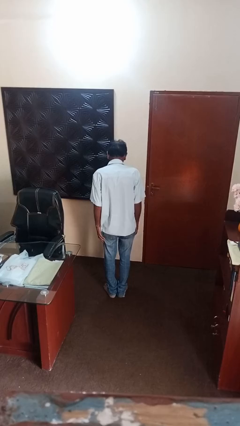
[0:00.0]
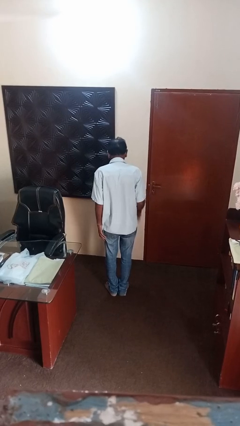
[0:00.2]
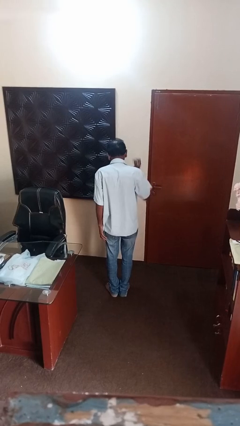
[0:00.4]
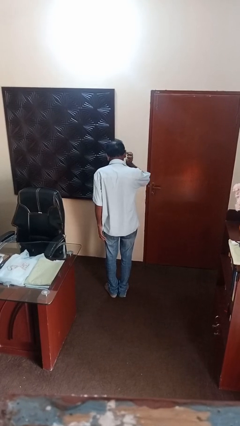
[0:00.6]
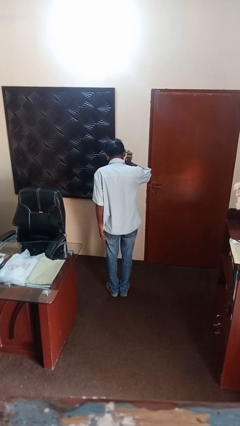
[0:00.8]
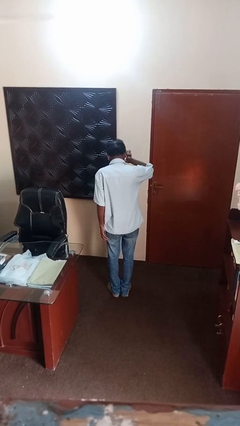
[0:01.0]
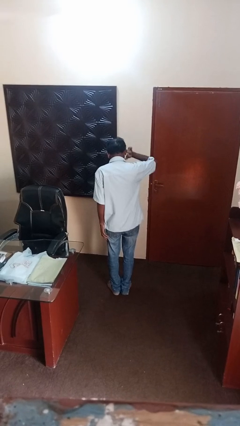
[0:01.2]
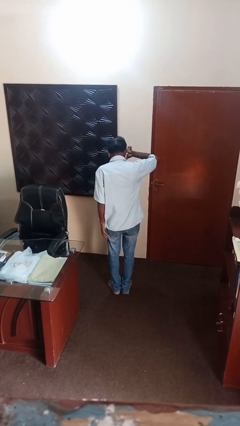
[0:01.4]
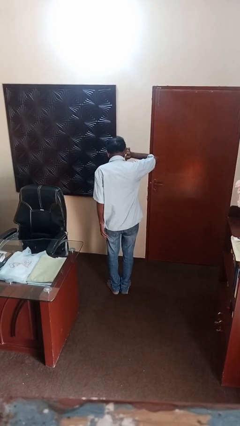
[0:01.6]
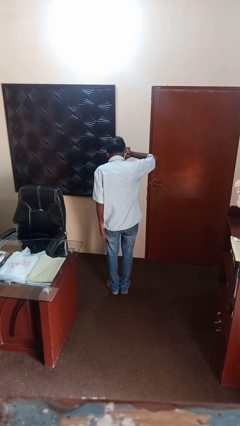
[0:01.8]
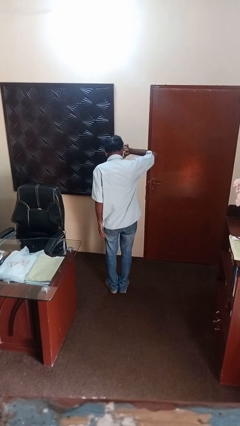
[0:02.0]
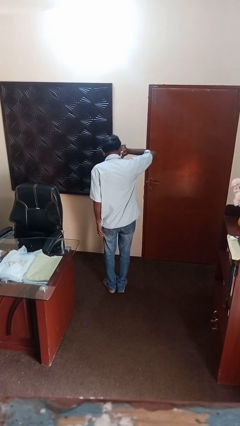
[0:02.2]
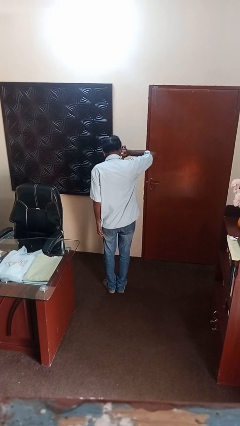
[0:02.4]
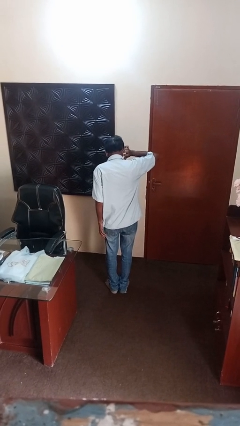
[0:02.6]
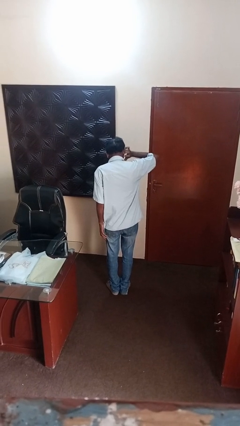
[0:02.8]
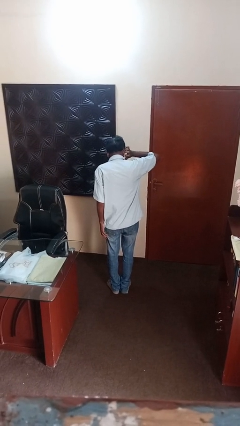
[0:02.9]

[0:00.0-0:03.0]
person puts fingers in ear

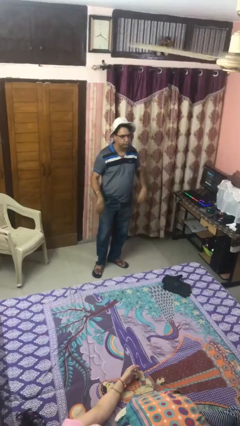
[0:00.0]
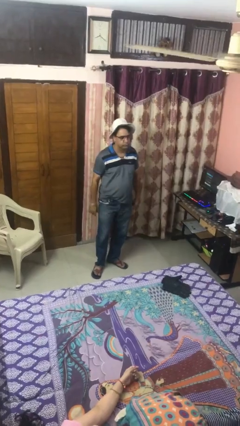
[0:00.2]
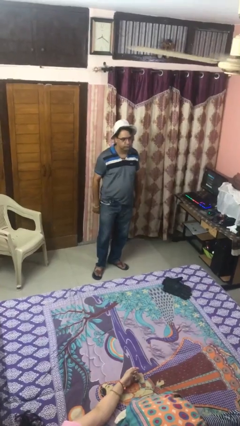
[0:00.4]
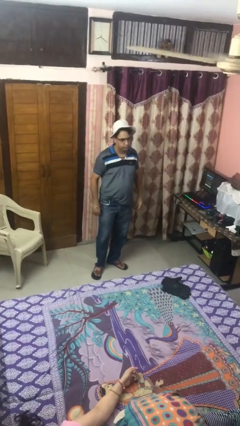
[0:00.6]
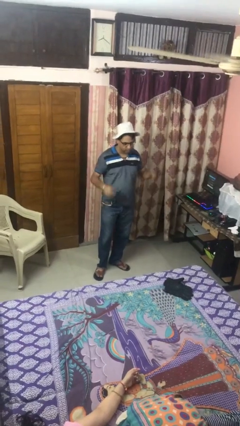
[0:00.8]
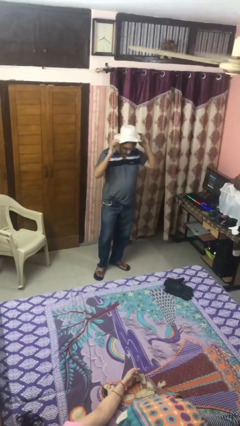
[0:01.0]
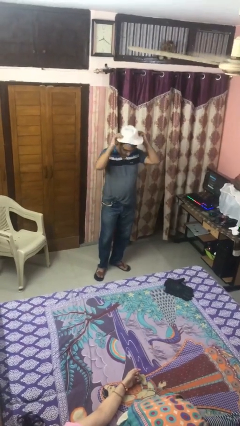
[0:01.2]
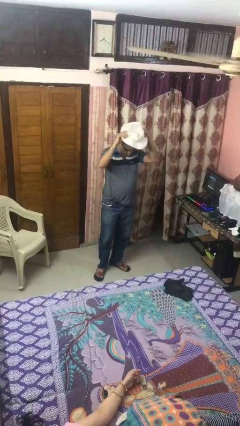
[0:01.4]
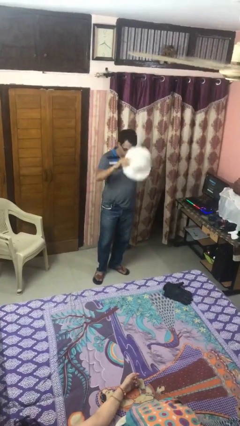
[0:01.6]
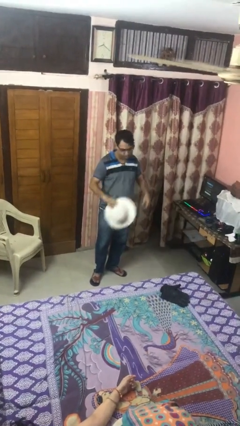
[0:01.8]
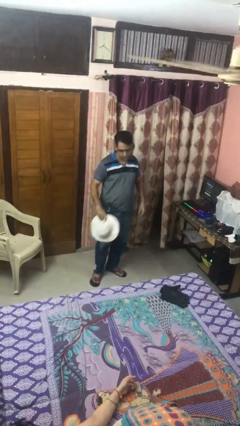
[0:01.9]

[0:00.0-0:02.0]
person takes off hat

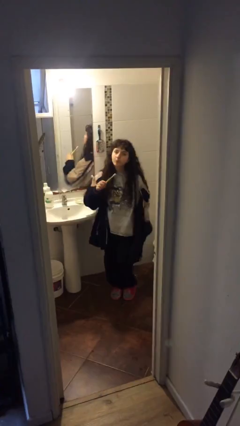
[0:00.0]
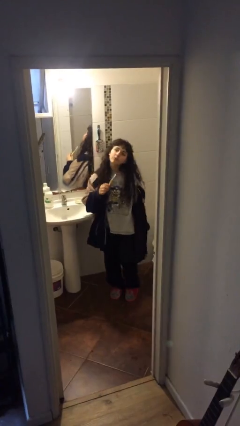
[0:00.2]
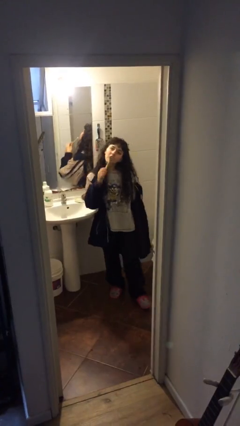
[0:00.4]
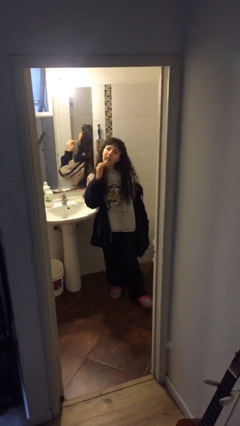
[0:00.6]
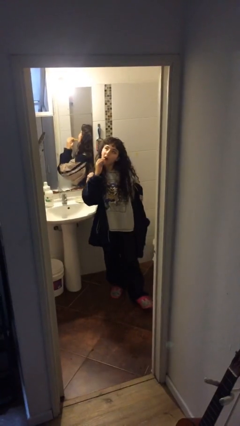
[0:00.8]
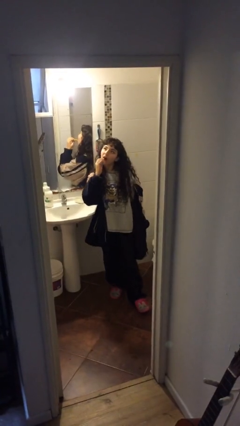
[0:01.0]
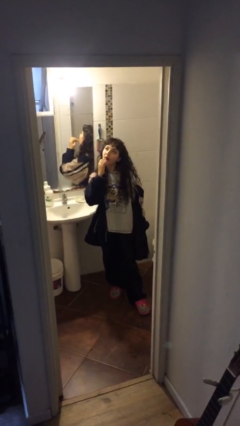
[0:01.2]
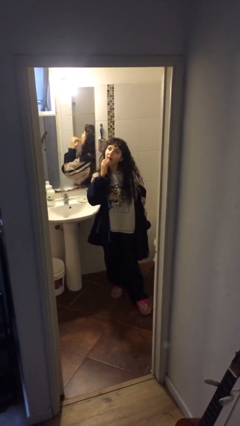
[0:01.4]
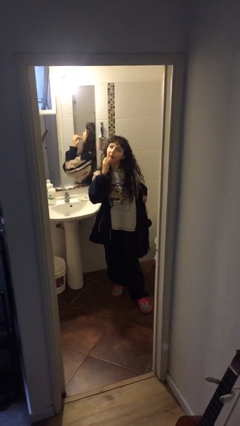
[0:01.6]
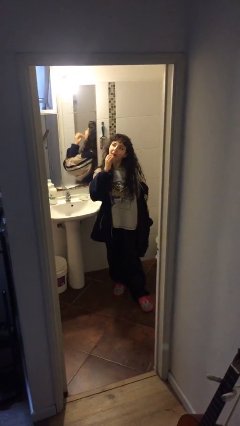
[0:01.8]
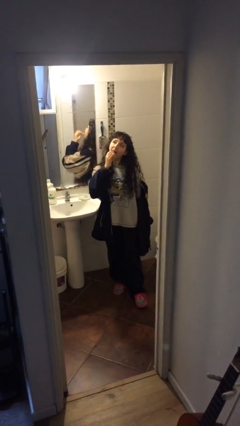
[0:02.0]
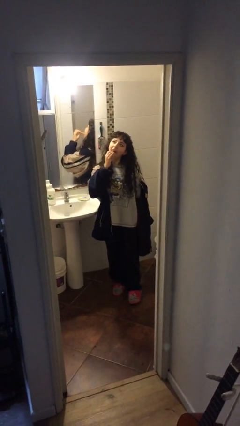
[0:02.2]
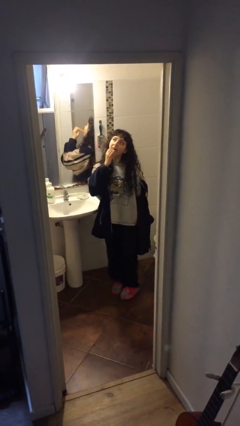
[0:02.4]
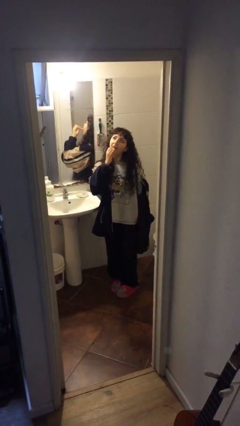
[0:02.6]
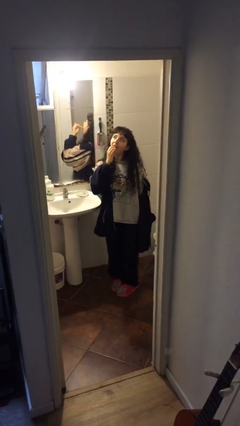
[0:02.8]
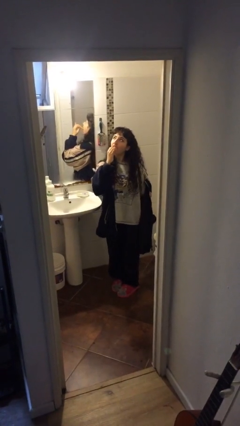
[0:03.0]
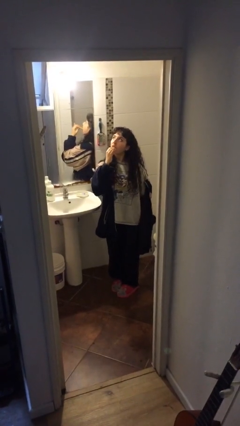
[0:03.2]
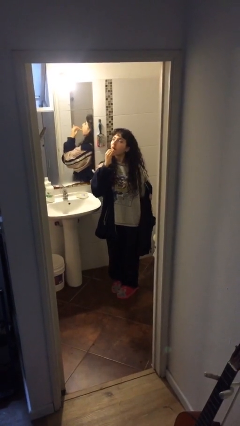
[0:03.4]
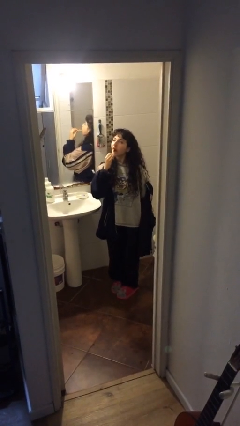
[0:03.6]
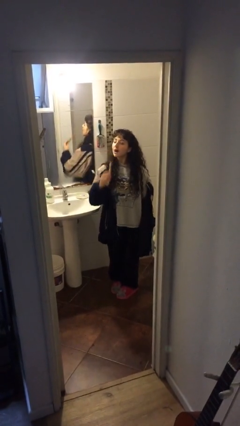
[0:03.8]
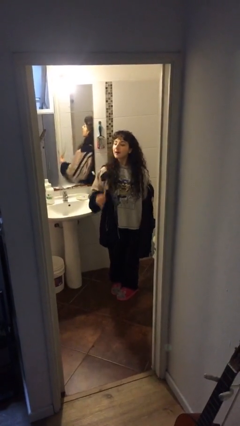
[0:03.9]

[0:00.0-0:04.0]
person brushes teeth

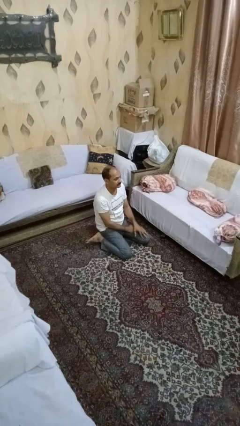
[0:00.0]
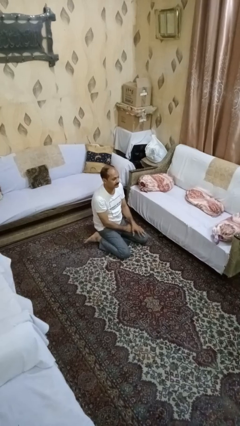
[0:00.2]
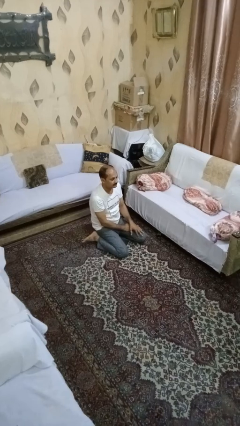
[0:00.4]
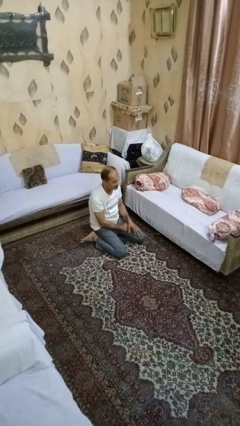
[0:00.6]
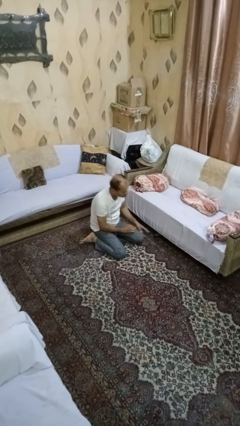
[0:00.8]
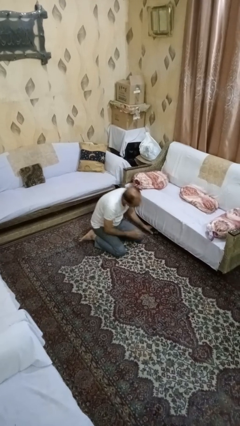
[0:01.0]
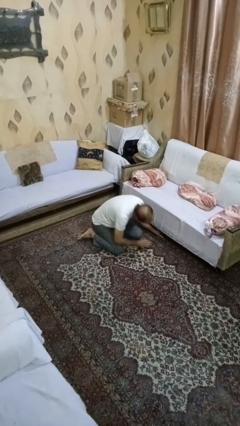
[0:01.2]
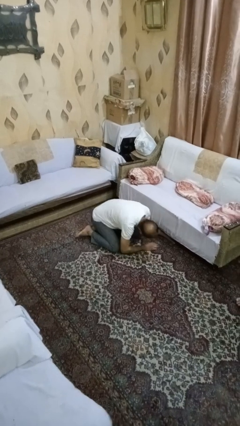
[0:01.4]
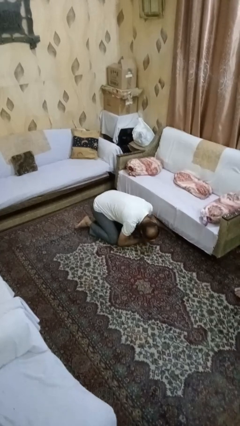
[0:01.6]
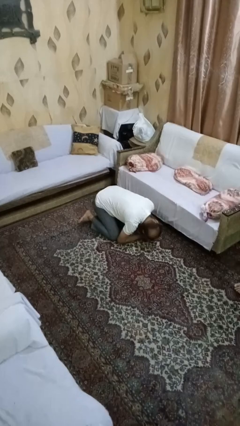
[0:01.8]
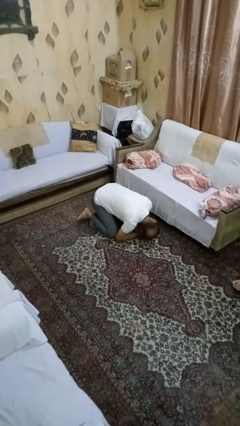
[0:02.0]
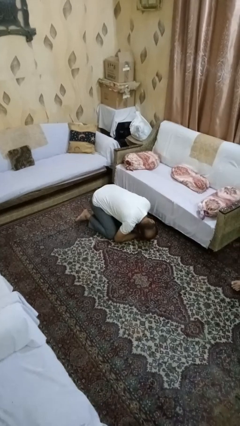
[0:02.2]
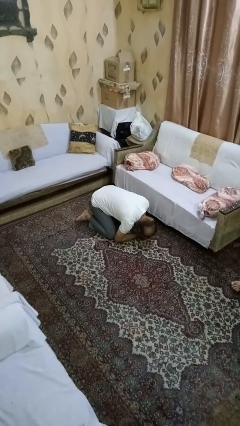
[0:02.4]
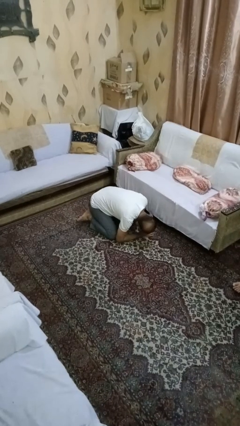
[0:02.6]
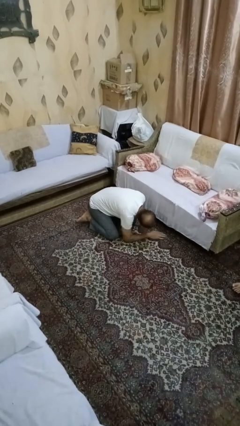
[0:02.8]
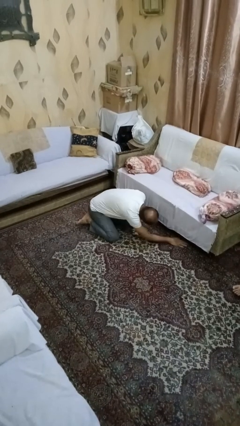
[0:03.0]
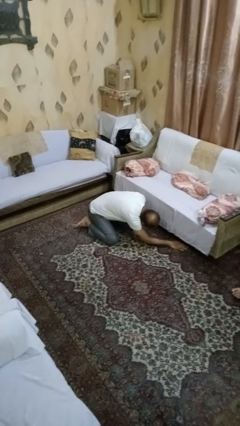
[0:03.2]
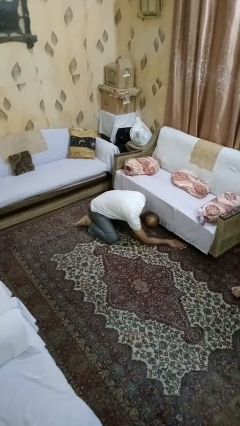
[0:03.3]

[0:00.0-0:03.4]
person searches under couch

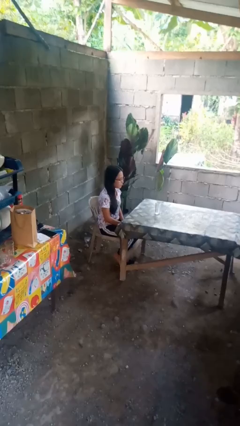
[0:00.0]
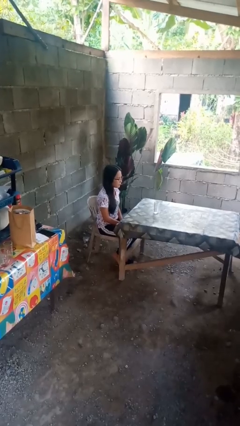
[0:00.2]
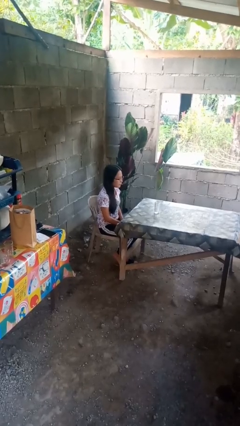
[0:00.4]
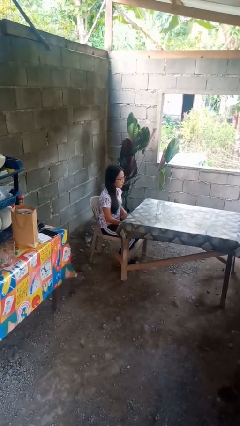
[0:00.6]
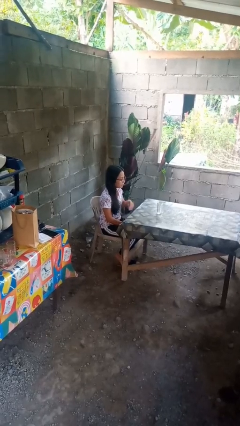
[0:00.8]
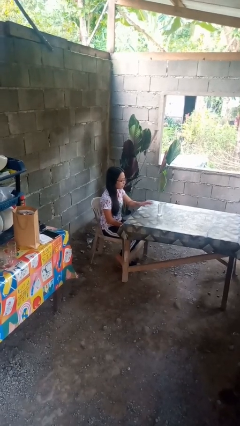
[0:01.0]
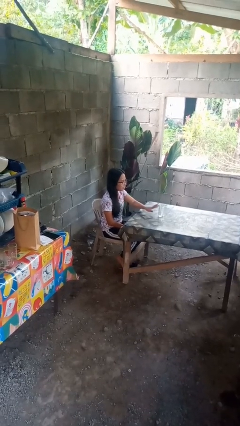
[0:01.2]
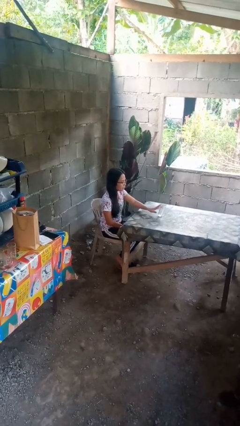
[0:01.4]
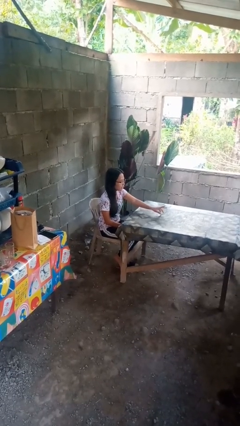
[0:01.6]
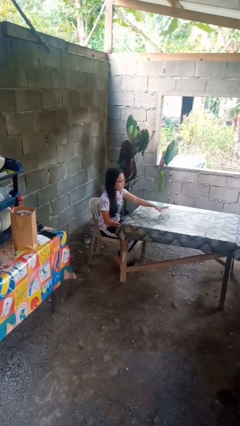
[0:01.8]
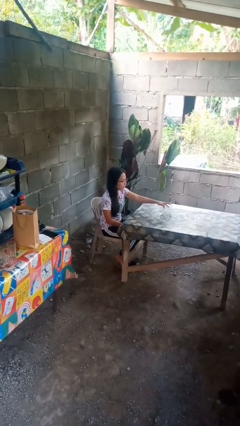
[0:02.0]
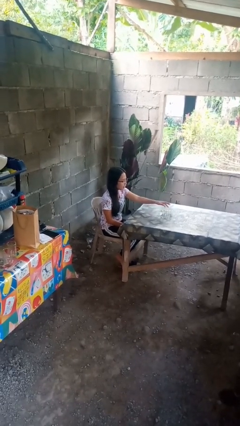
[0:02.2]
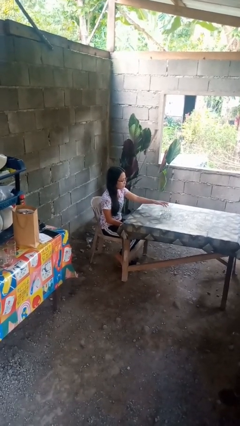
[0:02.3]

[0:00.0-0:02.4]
person knocks over glass

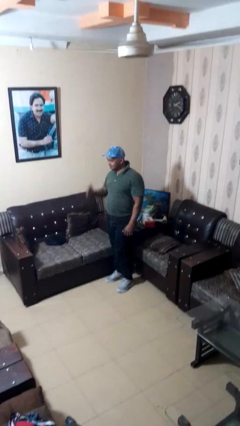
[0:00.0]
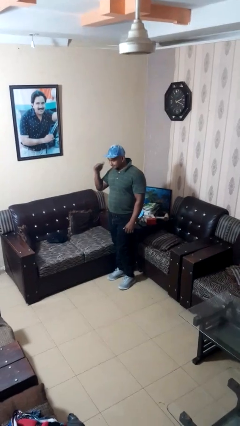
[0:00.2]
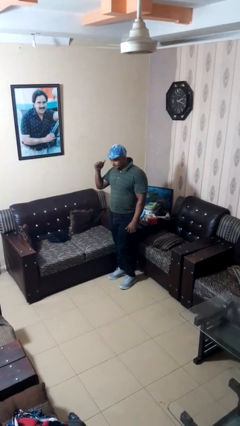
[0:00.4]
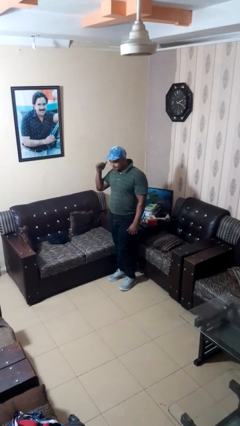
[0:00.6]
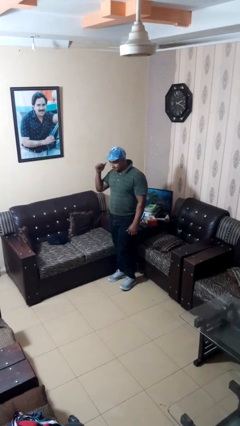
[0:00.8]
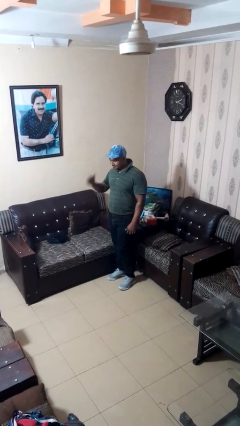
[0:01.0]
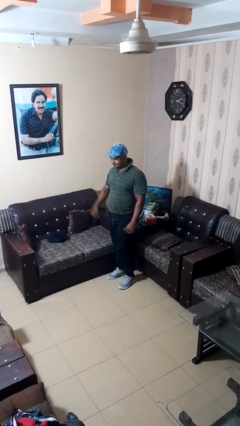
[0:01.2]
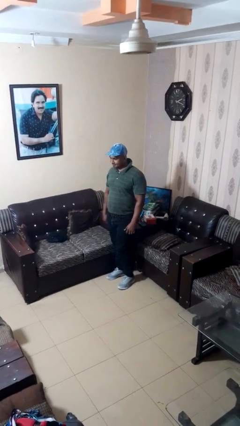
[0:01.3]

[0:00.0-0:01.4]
person gestures behind me

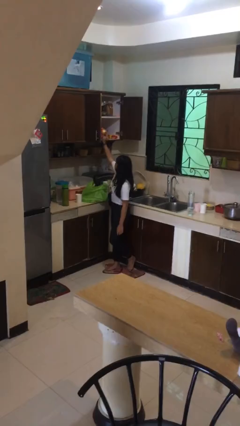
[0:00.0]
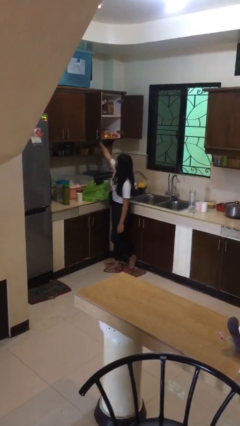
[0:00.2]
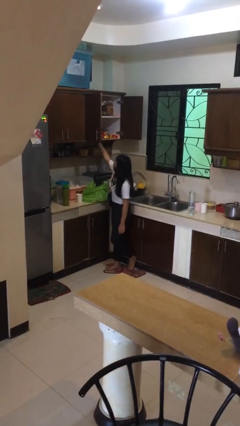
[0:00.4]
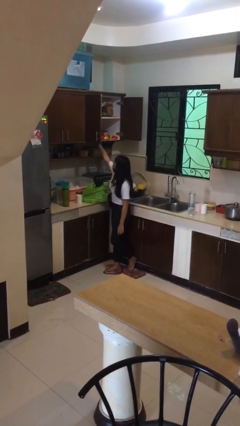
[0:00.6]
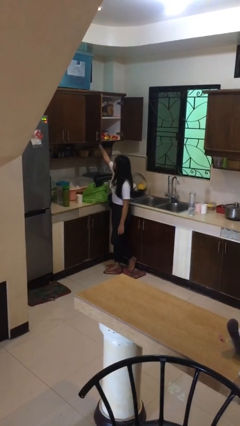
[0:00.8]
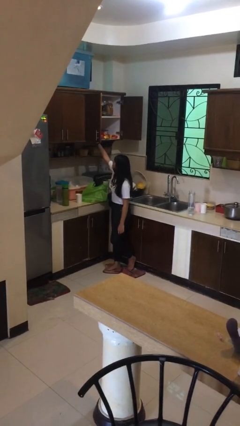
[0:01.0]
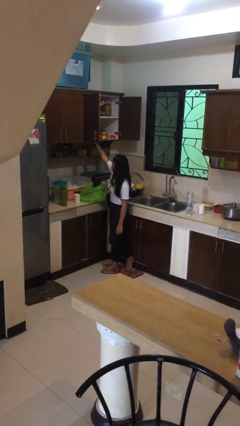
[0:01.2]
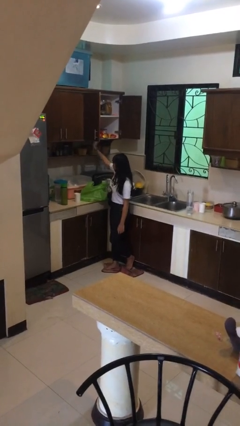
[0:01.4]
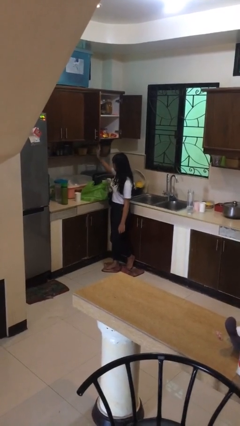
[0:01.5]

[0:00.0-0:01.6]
person loads groceries into cabinet
